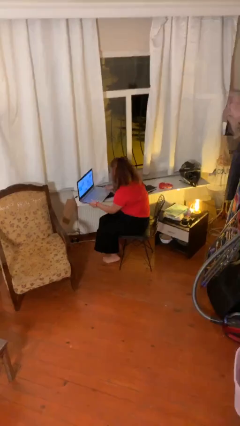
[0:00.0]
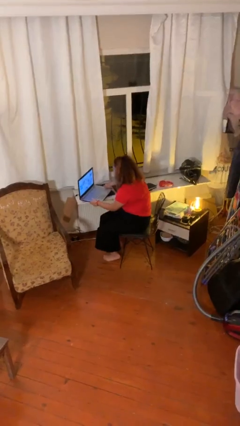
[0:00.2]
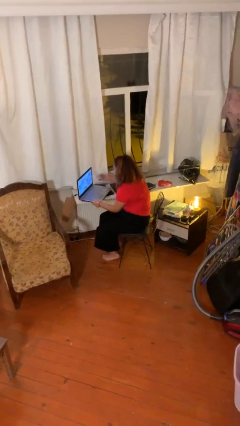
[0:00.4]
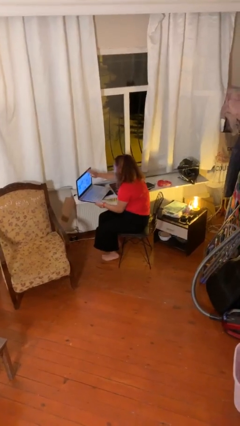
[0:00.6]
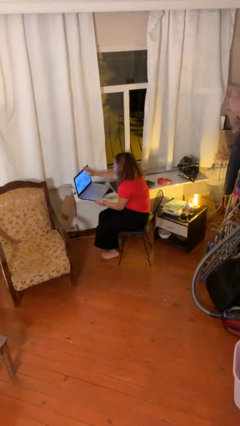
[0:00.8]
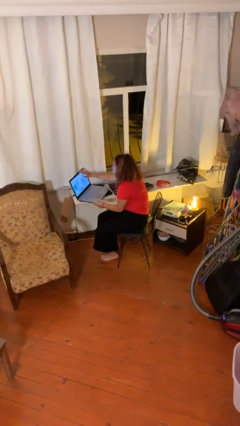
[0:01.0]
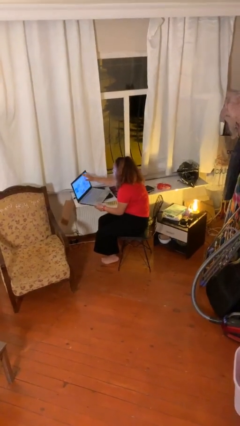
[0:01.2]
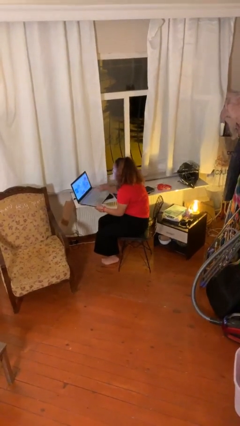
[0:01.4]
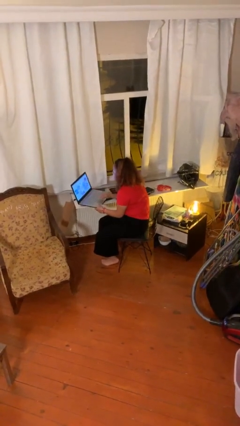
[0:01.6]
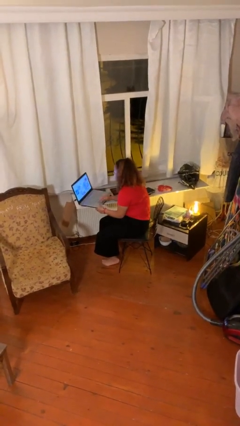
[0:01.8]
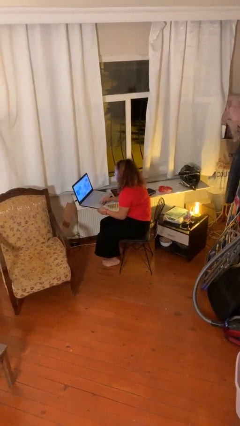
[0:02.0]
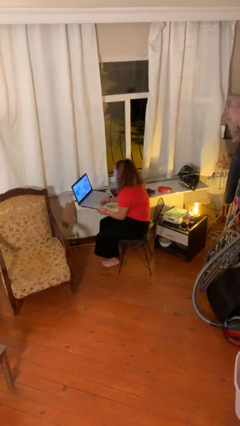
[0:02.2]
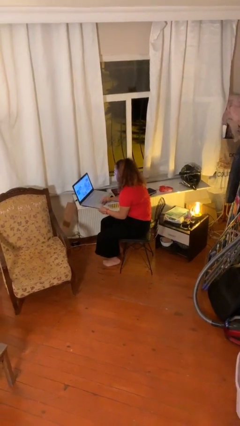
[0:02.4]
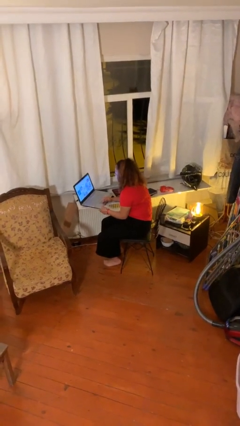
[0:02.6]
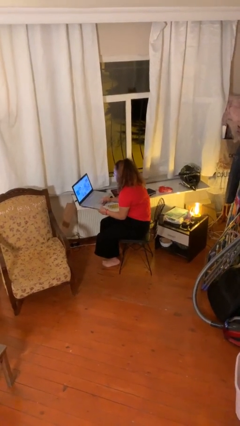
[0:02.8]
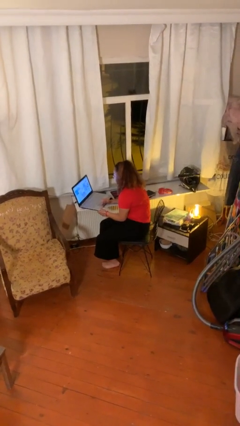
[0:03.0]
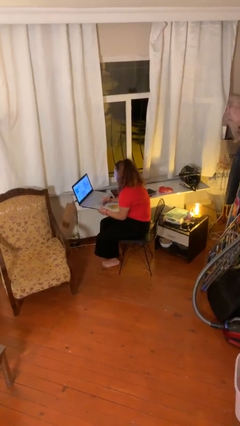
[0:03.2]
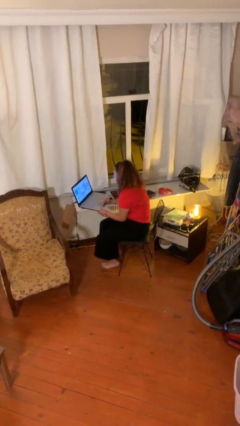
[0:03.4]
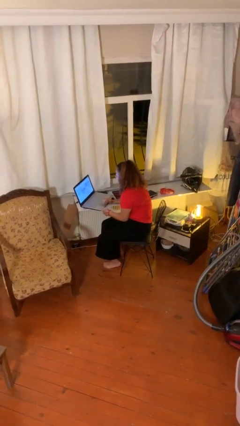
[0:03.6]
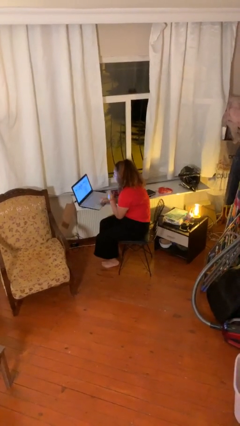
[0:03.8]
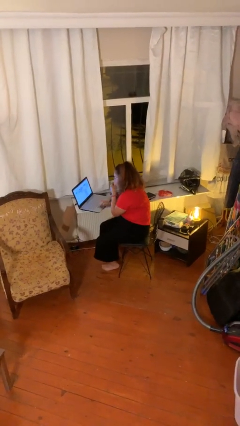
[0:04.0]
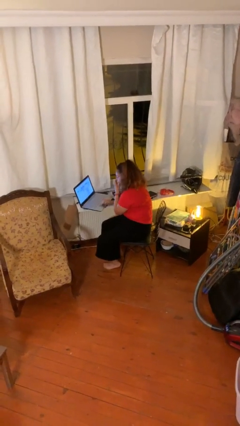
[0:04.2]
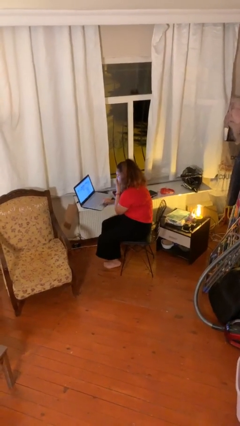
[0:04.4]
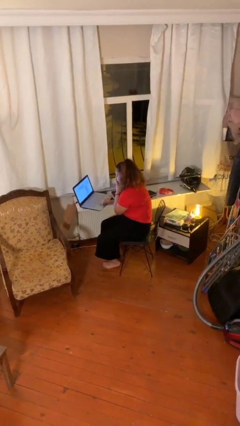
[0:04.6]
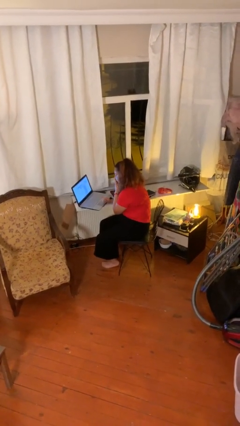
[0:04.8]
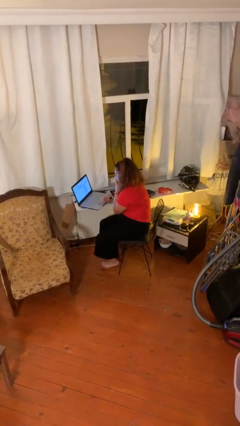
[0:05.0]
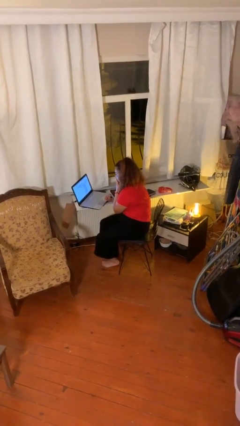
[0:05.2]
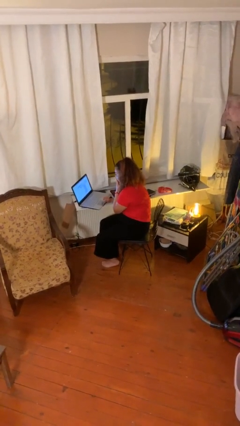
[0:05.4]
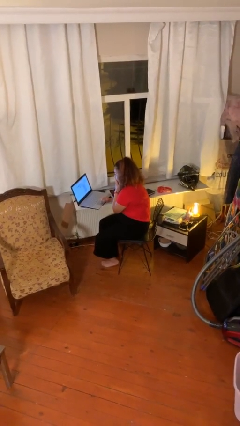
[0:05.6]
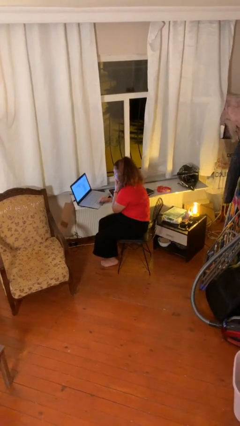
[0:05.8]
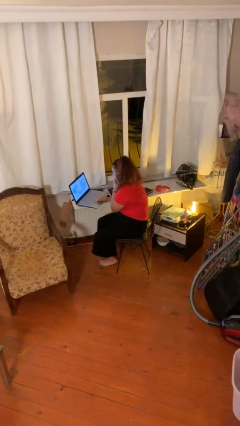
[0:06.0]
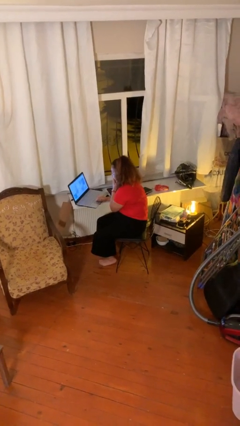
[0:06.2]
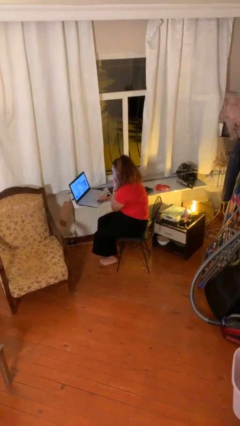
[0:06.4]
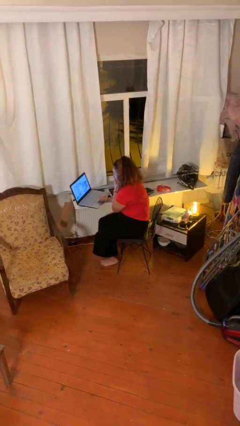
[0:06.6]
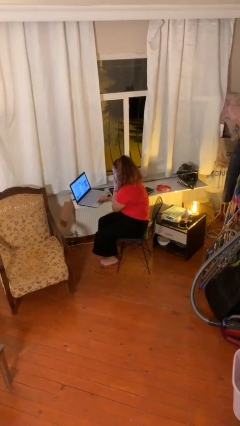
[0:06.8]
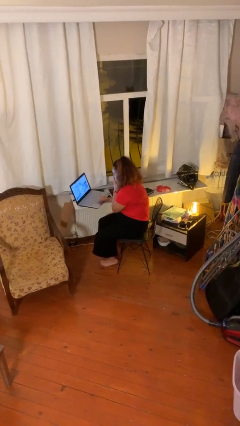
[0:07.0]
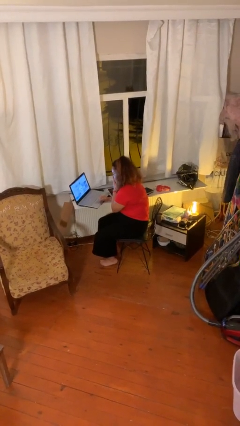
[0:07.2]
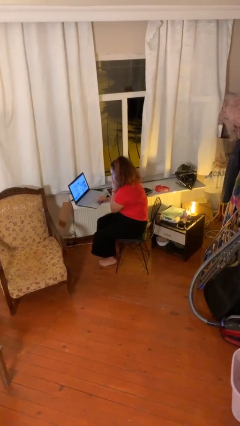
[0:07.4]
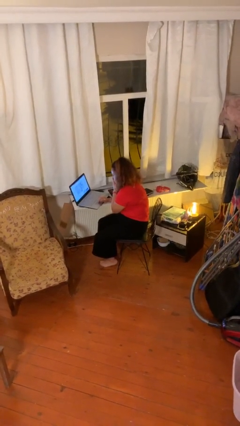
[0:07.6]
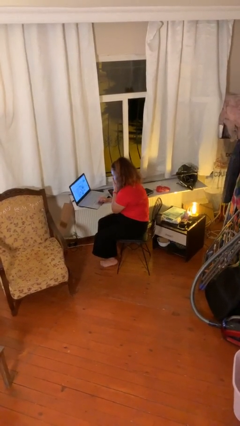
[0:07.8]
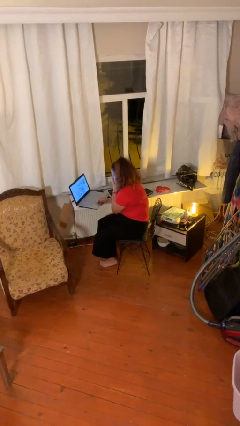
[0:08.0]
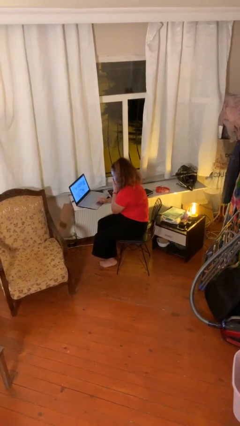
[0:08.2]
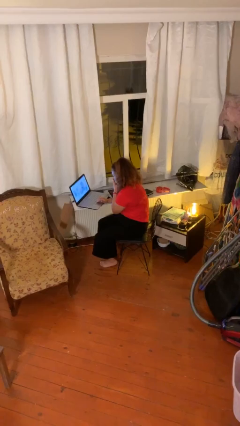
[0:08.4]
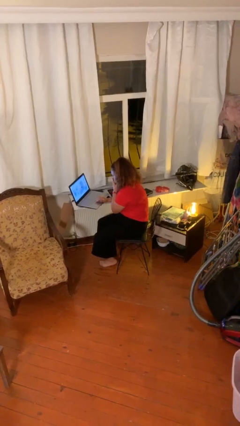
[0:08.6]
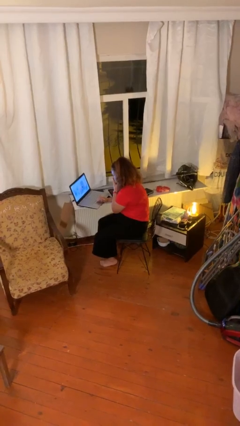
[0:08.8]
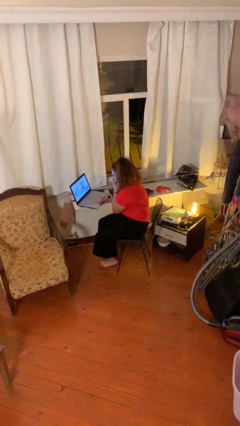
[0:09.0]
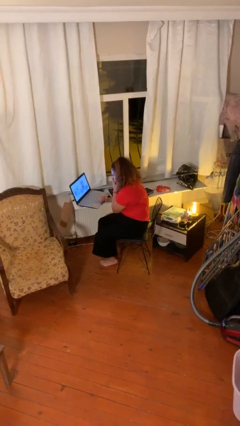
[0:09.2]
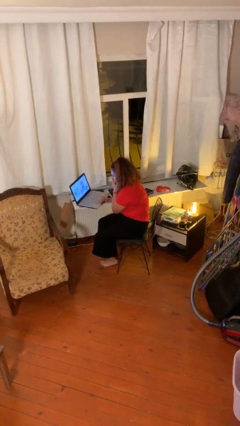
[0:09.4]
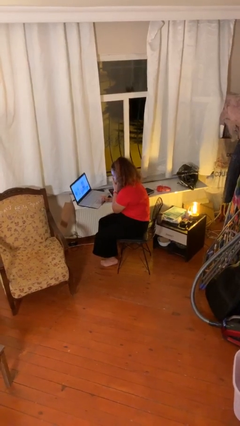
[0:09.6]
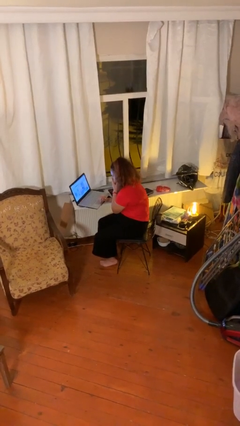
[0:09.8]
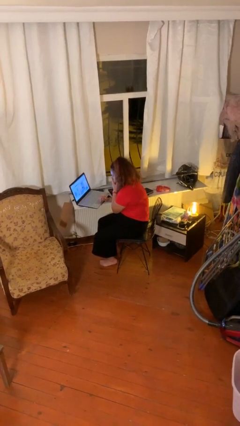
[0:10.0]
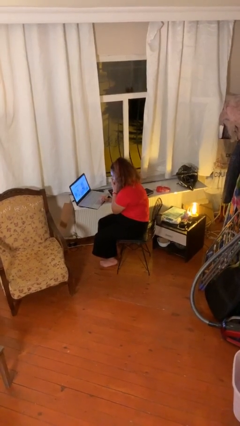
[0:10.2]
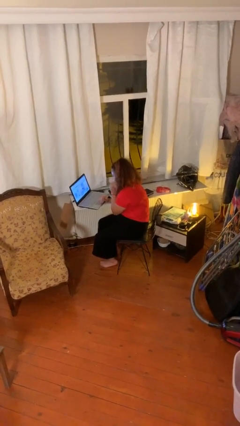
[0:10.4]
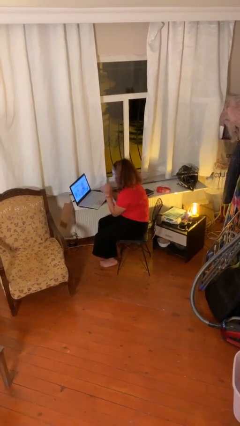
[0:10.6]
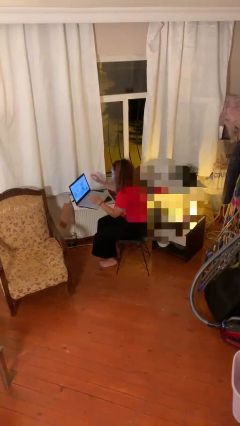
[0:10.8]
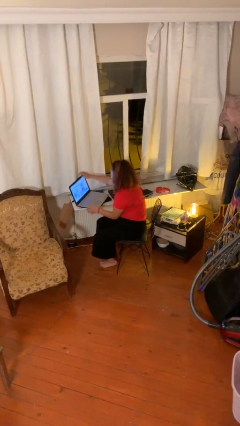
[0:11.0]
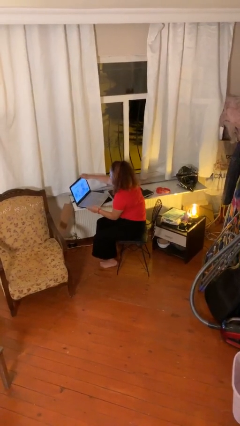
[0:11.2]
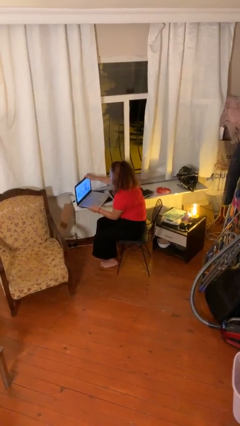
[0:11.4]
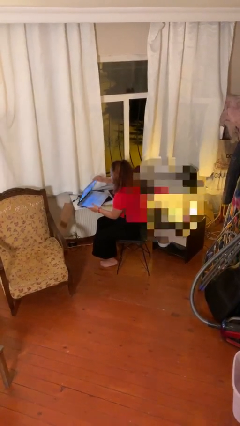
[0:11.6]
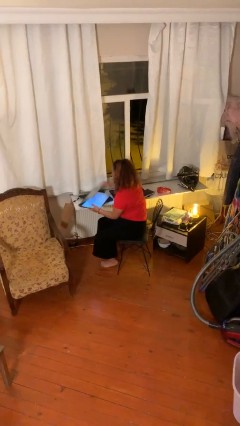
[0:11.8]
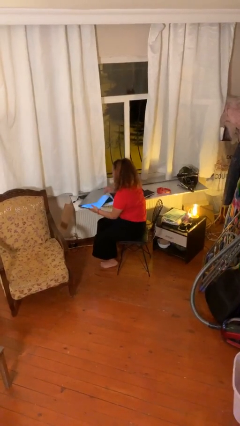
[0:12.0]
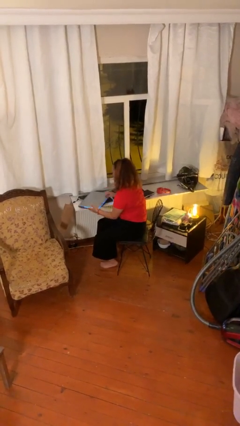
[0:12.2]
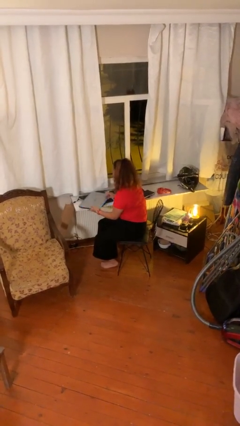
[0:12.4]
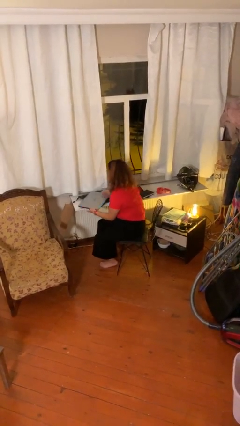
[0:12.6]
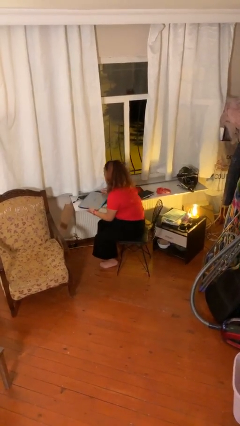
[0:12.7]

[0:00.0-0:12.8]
person interacts with laptop

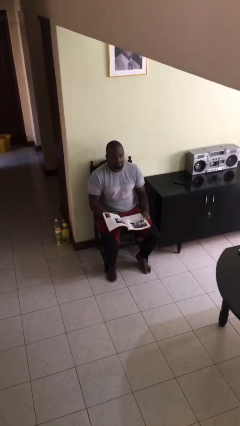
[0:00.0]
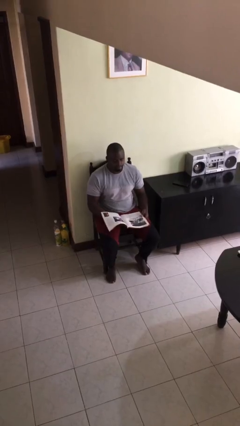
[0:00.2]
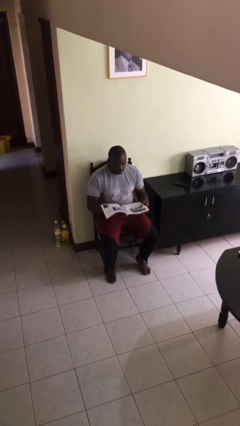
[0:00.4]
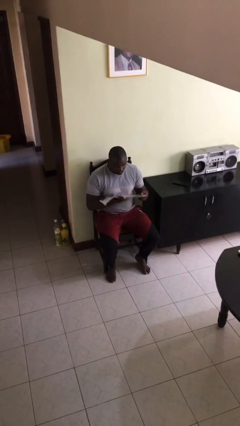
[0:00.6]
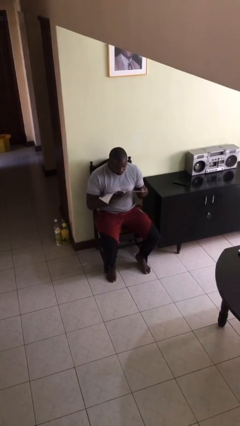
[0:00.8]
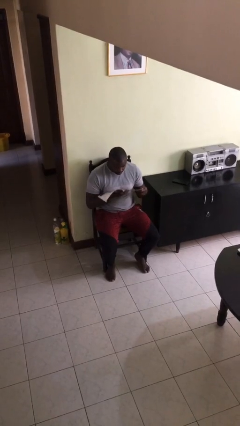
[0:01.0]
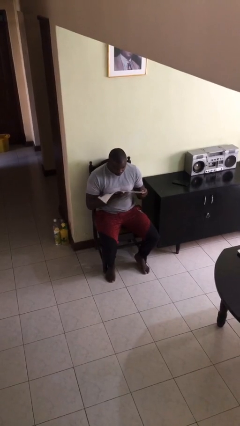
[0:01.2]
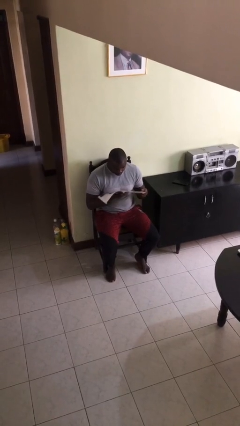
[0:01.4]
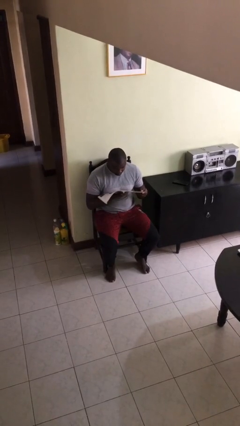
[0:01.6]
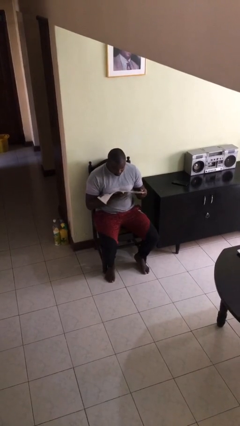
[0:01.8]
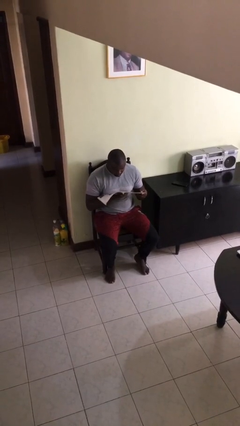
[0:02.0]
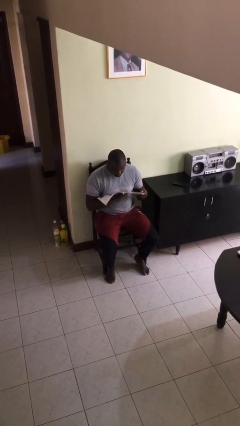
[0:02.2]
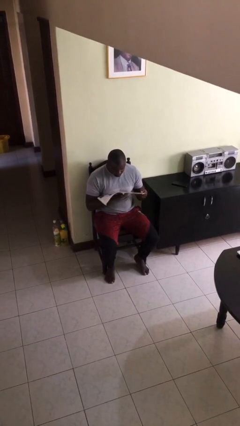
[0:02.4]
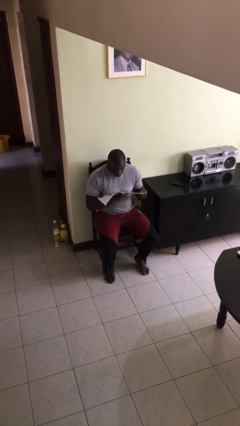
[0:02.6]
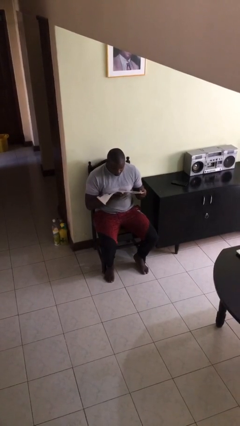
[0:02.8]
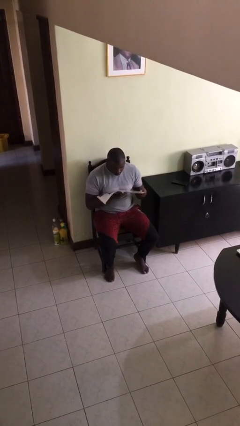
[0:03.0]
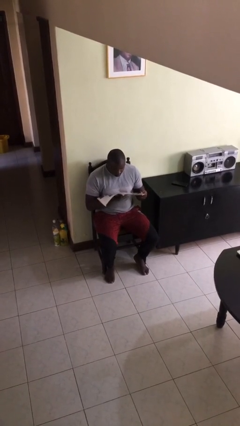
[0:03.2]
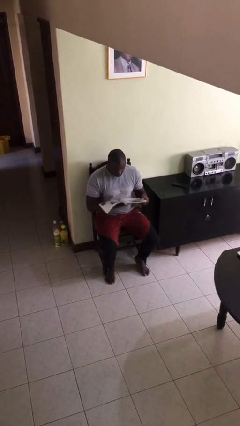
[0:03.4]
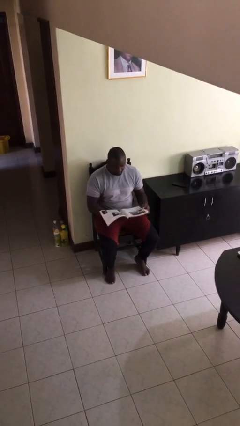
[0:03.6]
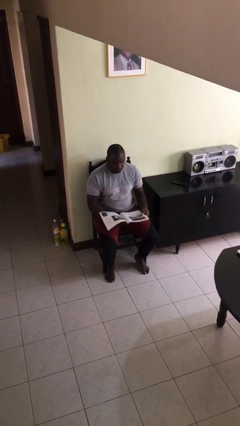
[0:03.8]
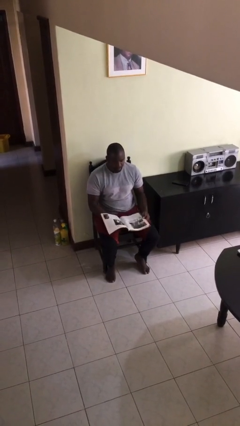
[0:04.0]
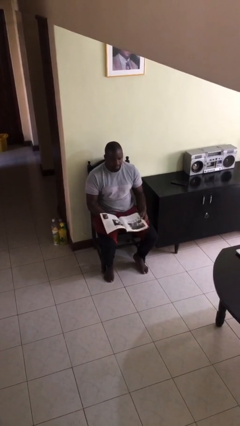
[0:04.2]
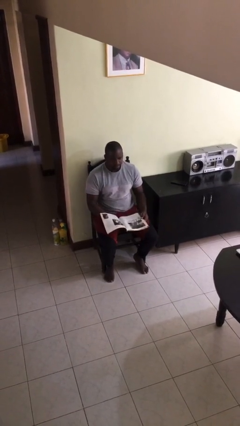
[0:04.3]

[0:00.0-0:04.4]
person reads document

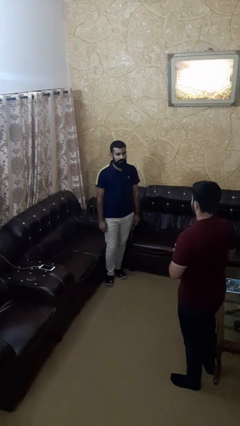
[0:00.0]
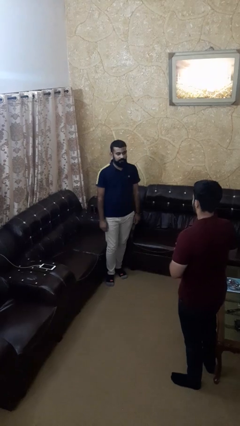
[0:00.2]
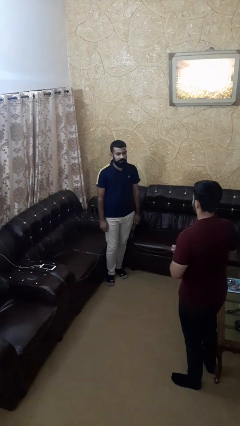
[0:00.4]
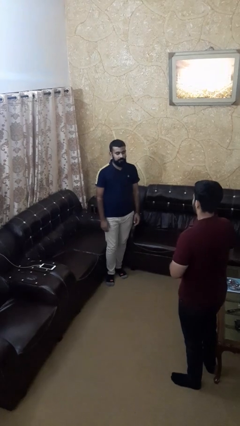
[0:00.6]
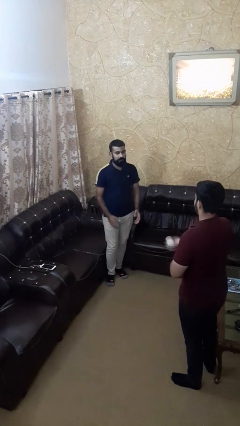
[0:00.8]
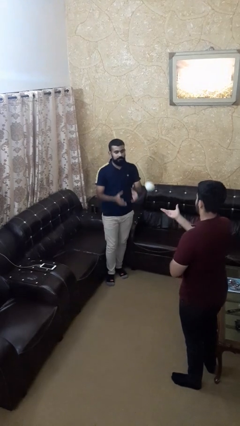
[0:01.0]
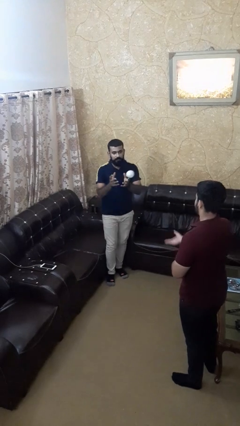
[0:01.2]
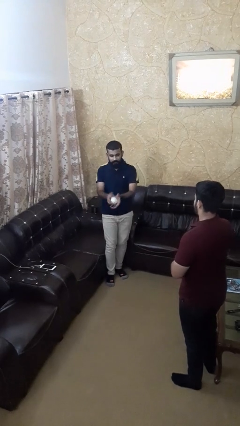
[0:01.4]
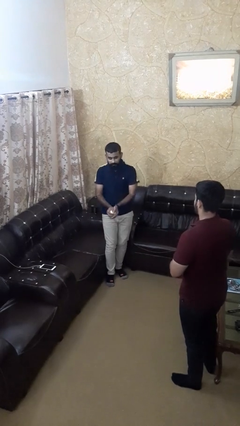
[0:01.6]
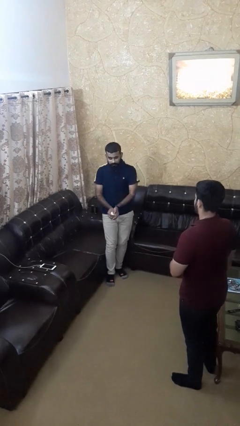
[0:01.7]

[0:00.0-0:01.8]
person catches object from person
